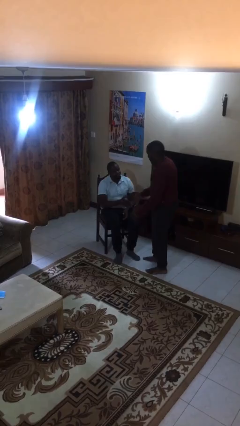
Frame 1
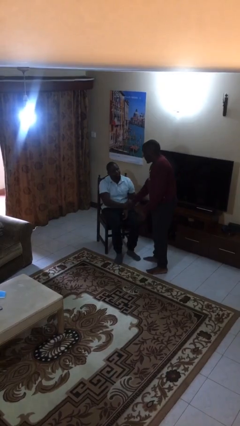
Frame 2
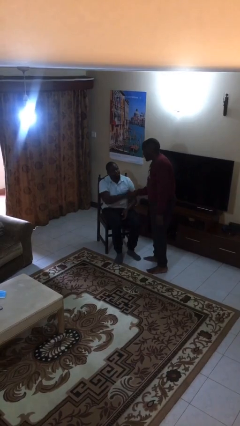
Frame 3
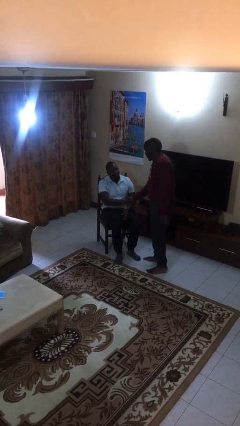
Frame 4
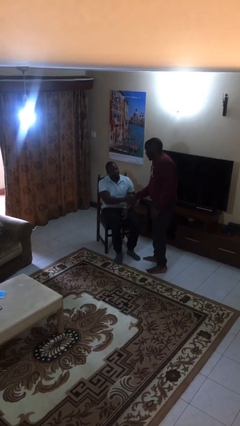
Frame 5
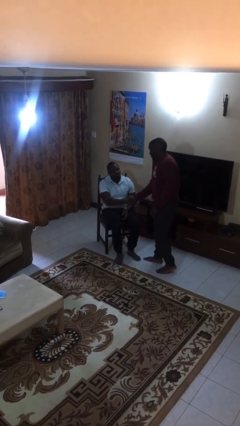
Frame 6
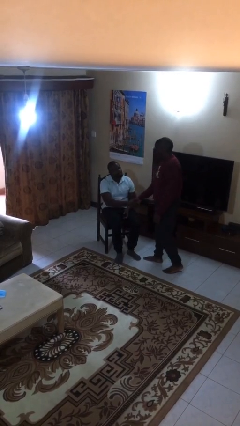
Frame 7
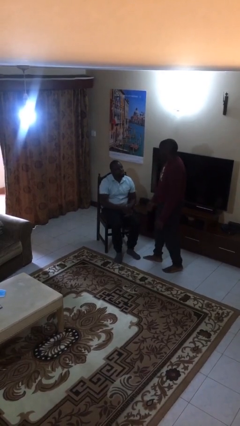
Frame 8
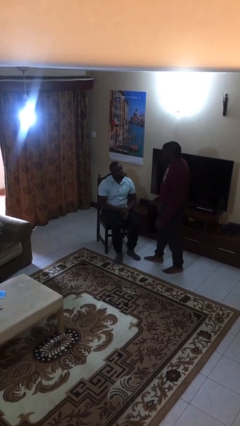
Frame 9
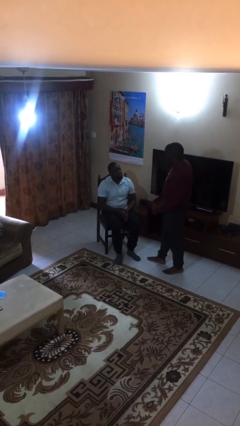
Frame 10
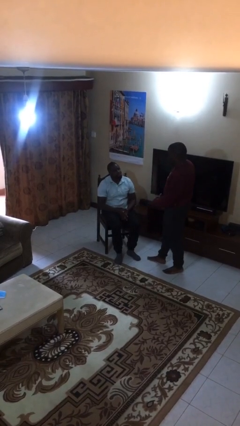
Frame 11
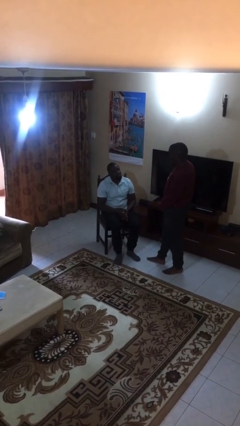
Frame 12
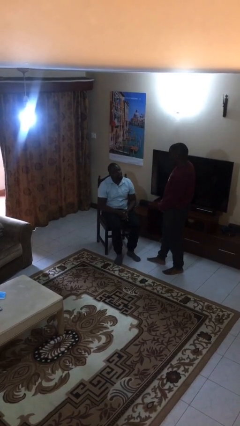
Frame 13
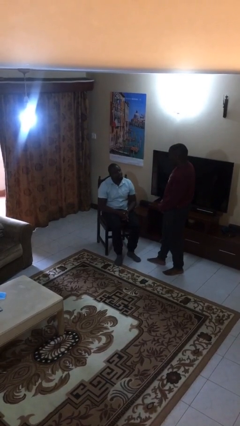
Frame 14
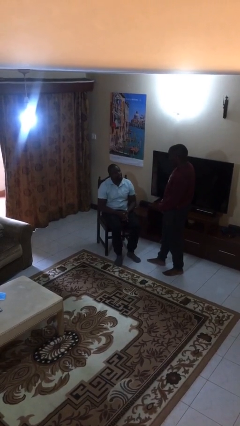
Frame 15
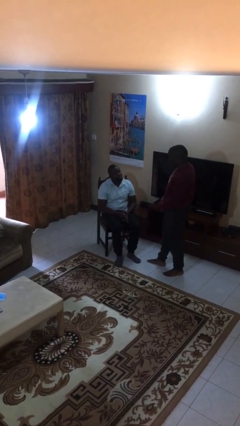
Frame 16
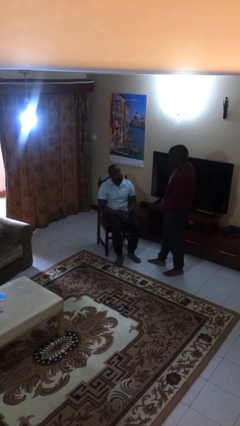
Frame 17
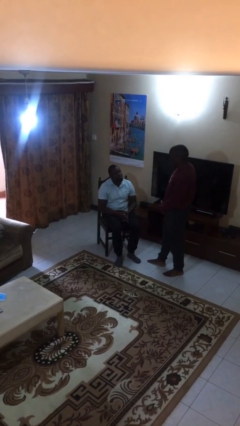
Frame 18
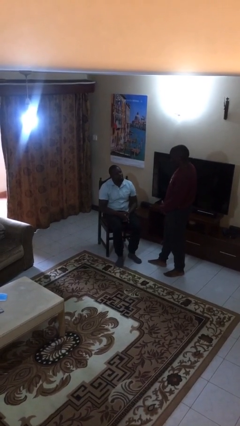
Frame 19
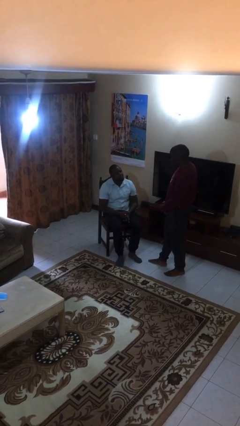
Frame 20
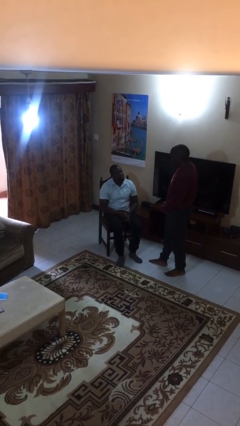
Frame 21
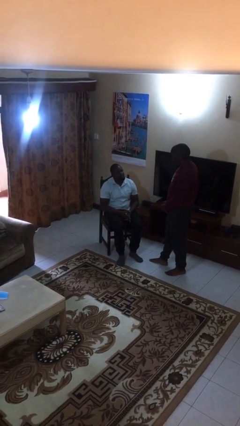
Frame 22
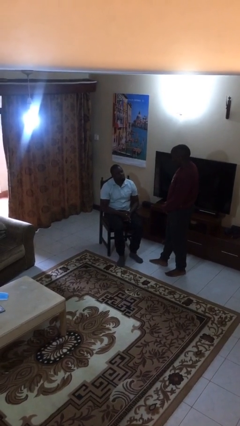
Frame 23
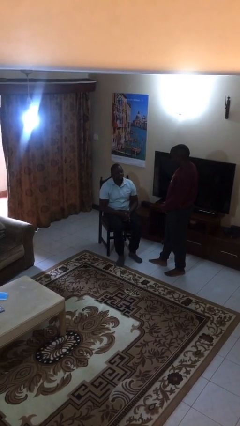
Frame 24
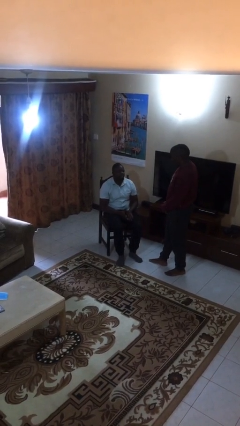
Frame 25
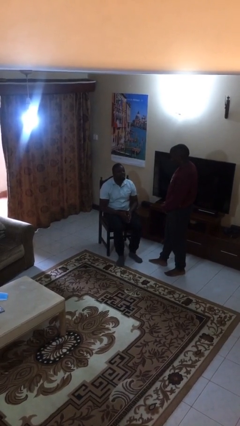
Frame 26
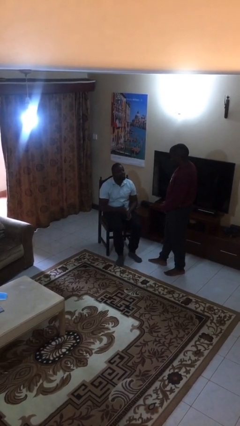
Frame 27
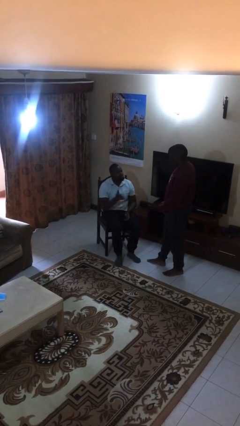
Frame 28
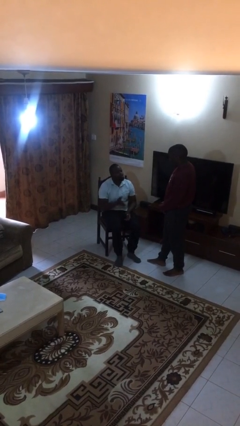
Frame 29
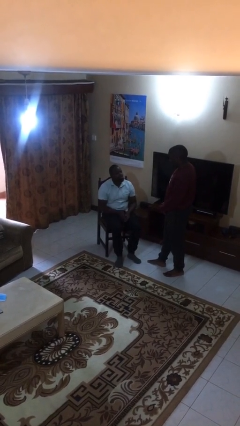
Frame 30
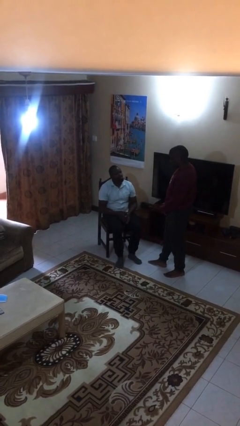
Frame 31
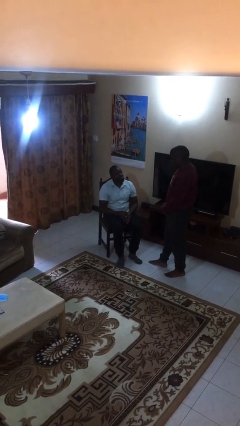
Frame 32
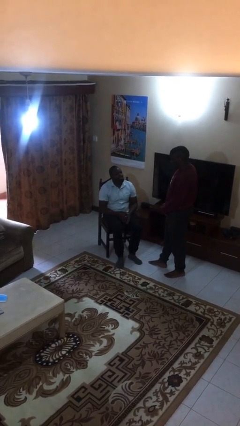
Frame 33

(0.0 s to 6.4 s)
person shakes hand

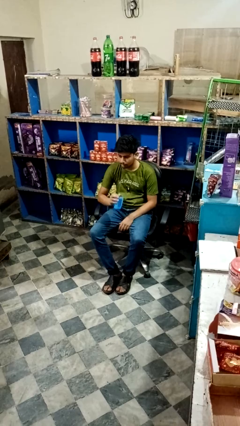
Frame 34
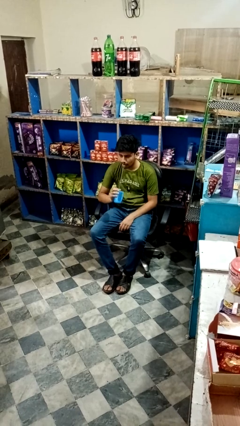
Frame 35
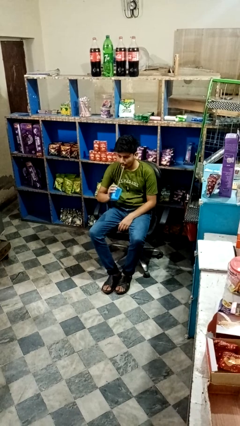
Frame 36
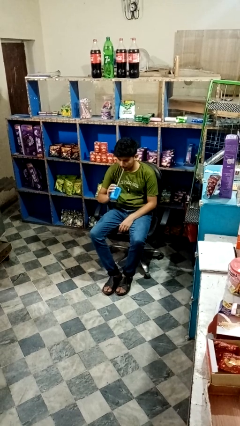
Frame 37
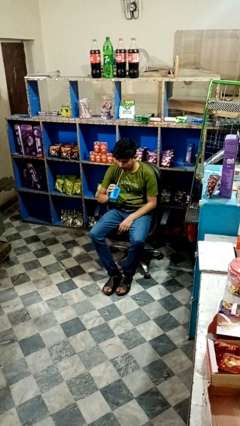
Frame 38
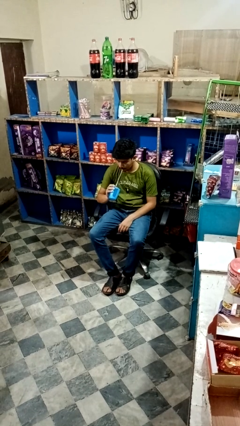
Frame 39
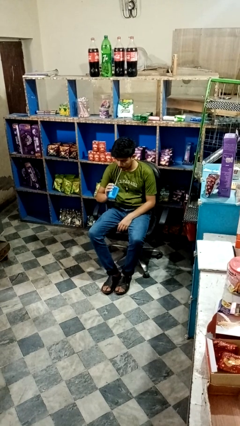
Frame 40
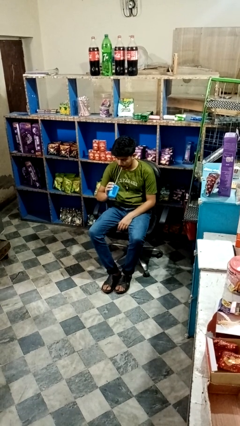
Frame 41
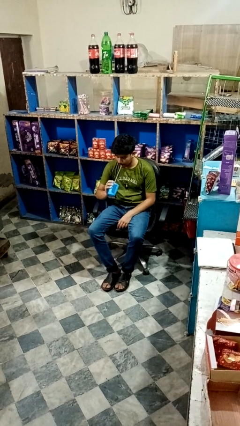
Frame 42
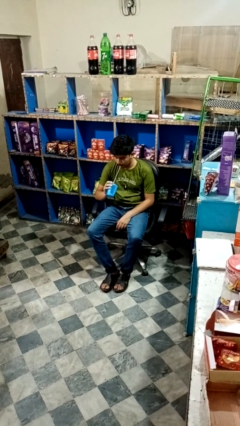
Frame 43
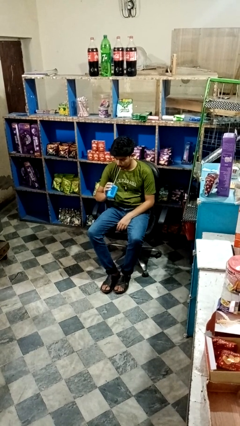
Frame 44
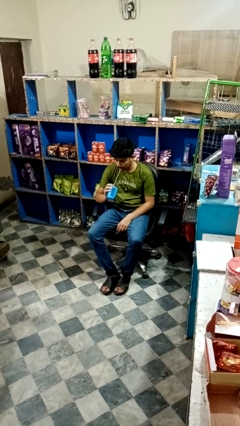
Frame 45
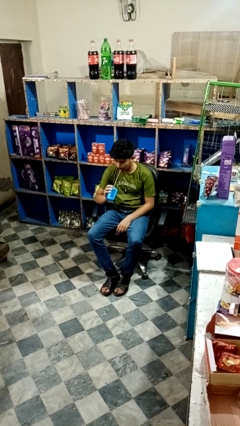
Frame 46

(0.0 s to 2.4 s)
person drinks from straw

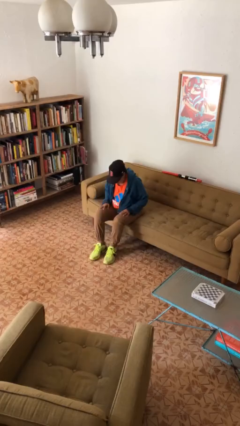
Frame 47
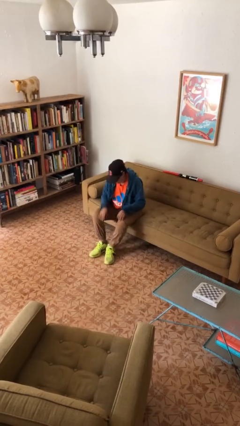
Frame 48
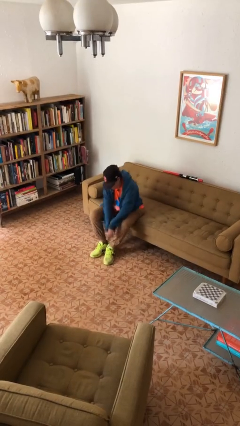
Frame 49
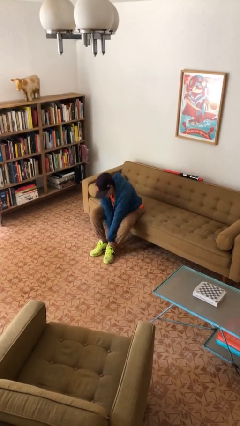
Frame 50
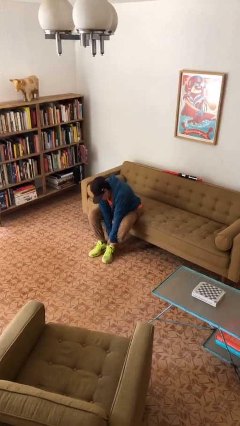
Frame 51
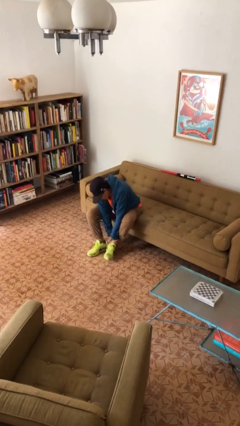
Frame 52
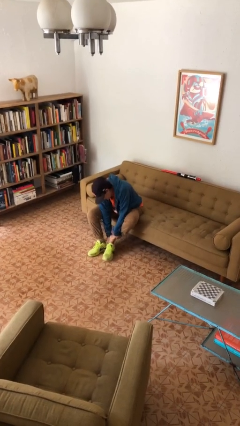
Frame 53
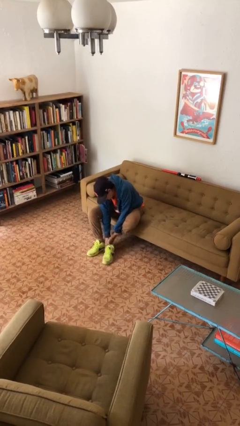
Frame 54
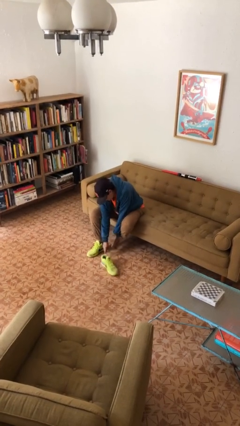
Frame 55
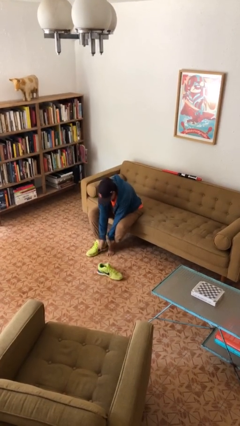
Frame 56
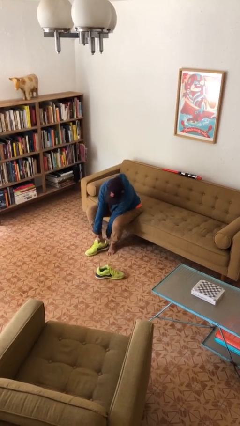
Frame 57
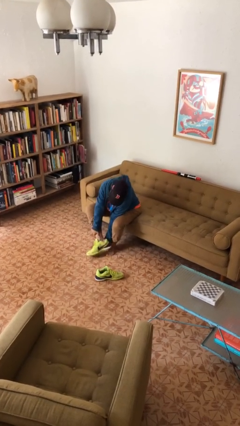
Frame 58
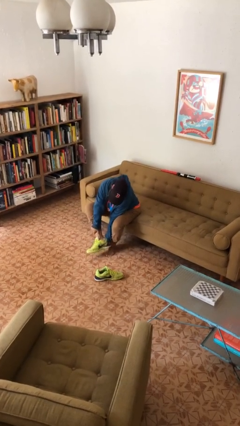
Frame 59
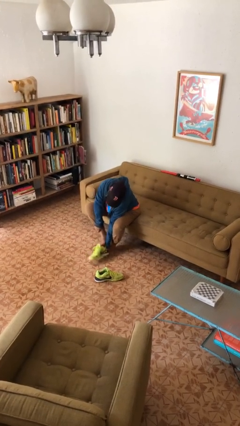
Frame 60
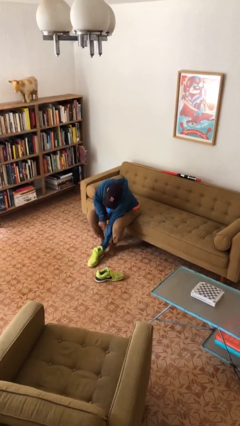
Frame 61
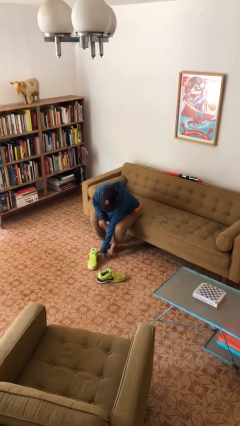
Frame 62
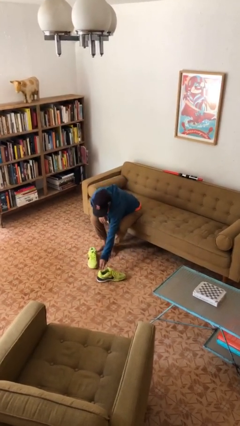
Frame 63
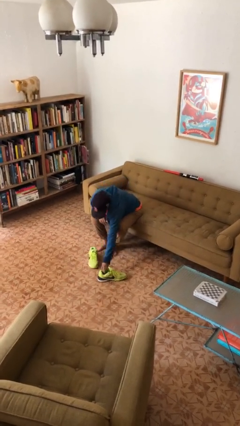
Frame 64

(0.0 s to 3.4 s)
person takes off shoes

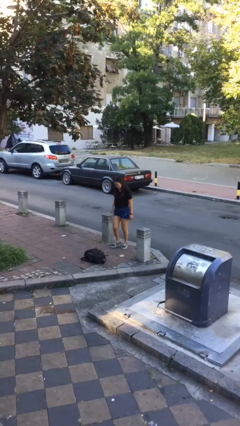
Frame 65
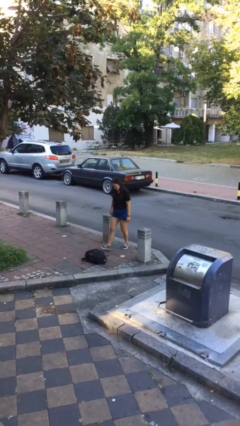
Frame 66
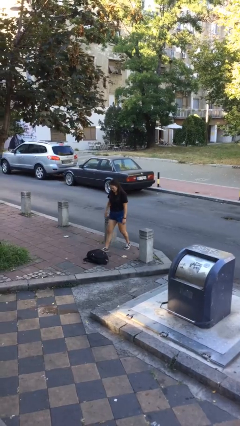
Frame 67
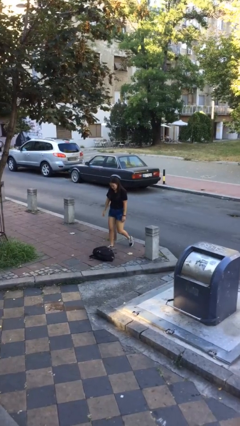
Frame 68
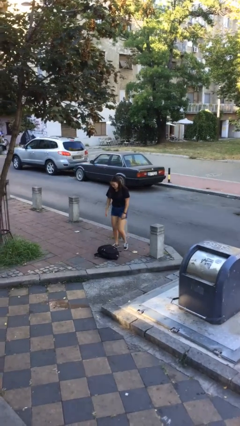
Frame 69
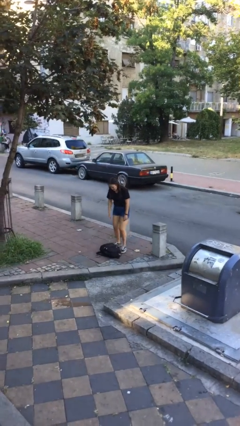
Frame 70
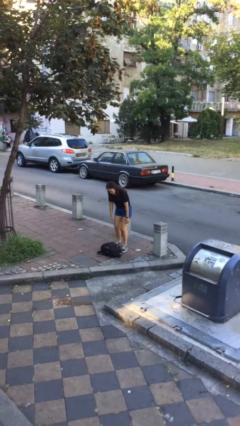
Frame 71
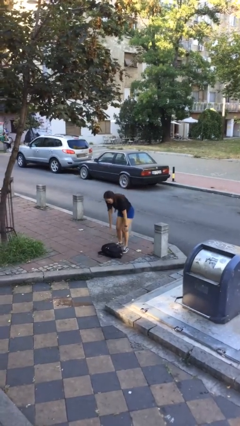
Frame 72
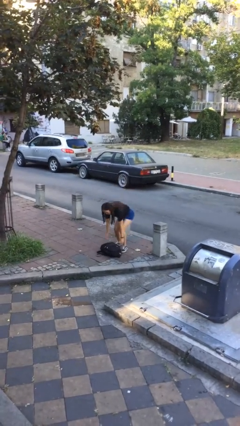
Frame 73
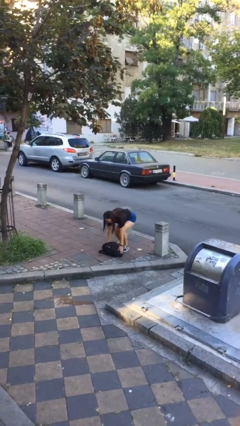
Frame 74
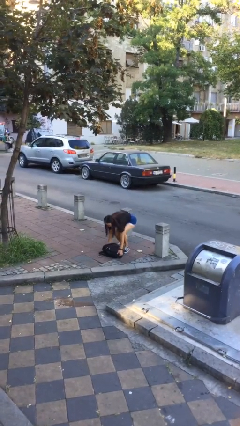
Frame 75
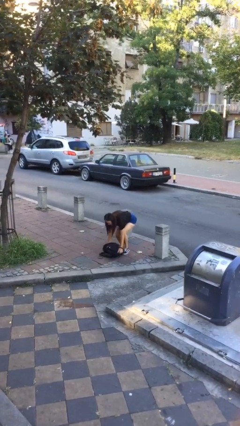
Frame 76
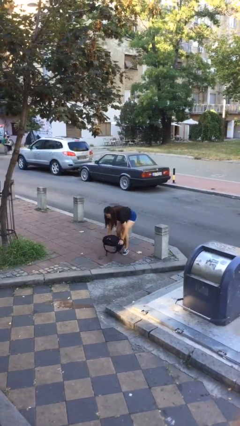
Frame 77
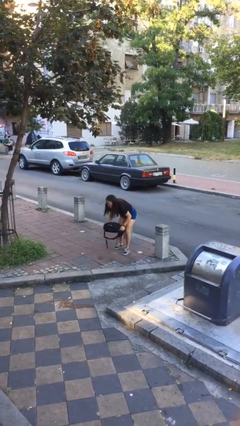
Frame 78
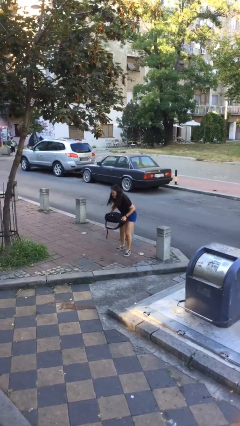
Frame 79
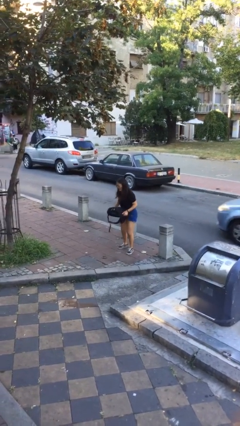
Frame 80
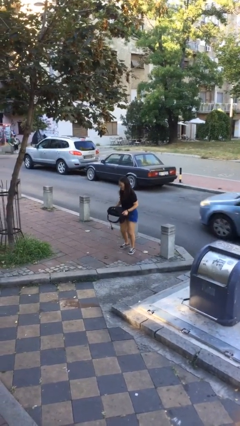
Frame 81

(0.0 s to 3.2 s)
person picks up object from floor

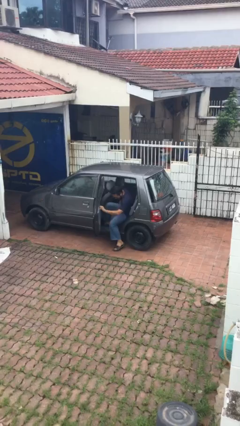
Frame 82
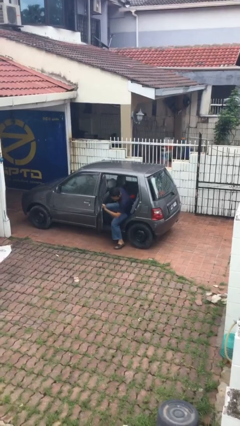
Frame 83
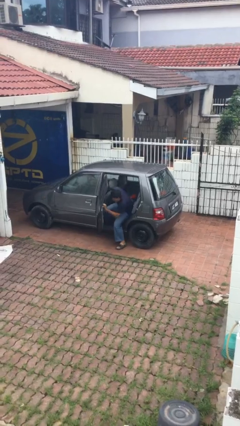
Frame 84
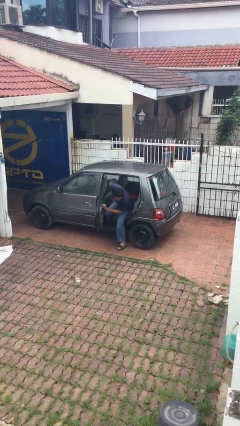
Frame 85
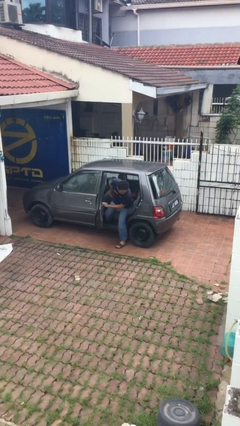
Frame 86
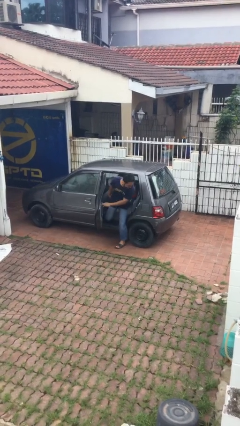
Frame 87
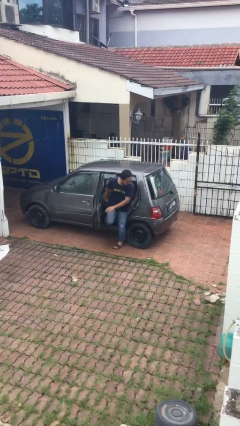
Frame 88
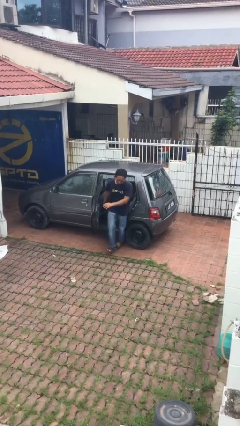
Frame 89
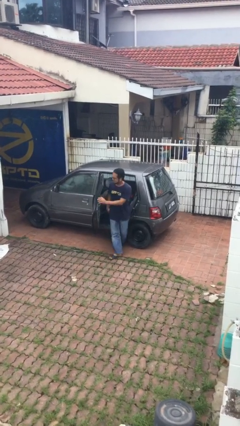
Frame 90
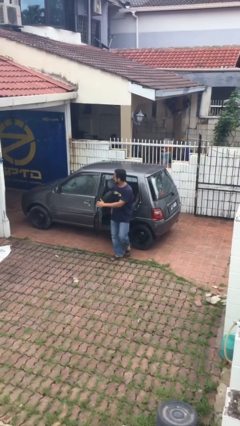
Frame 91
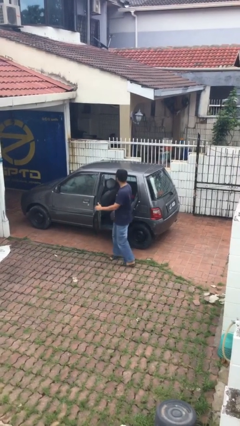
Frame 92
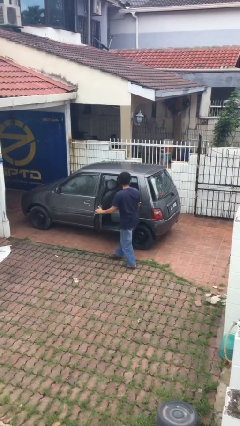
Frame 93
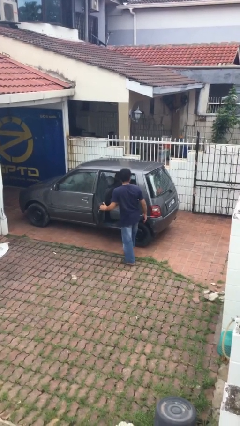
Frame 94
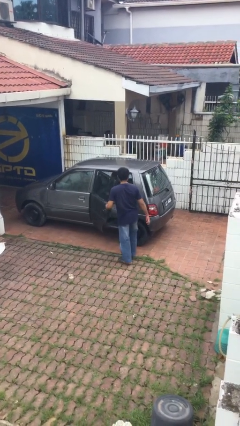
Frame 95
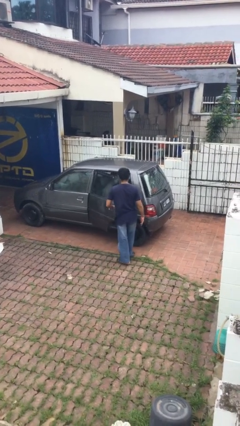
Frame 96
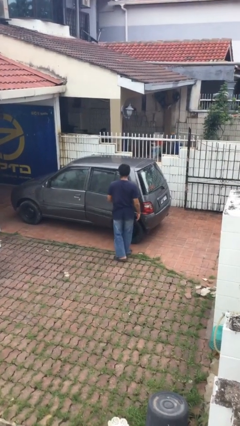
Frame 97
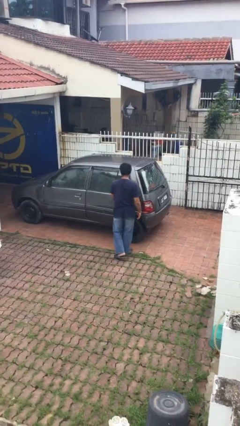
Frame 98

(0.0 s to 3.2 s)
person exits car
